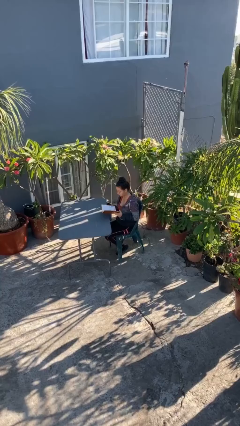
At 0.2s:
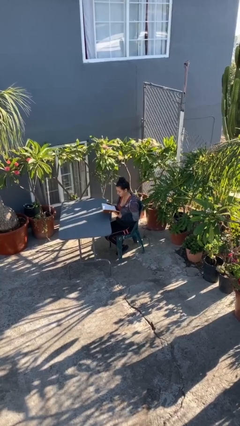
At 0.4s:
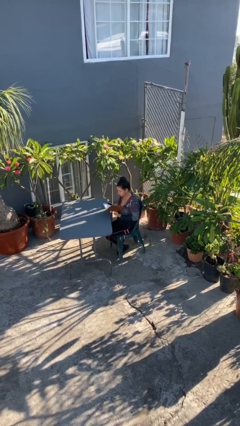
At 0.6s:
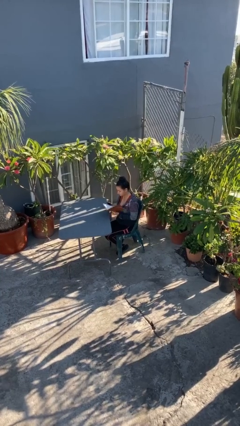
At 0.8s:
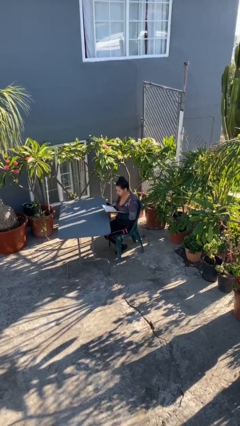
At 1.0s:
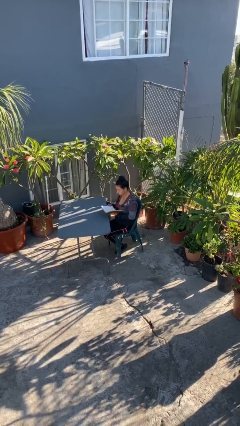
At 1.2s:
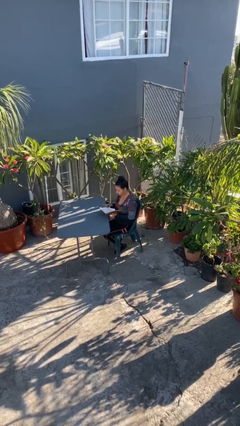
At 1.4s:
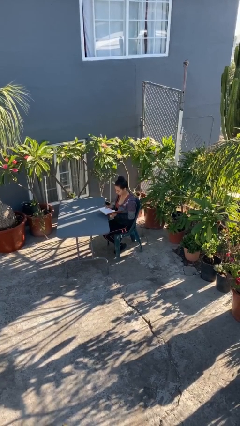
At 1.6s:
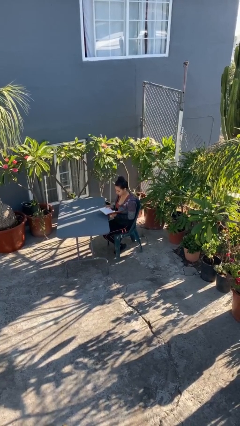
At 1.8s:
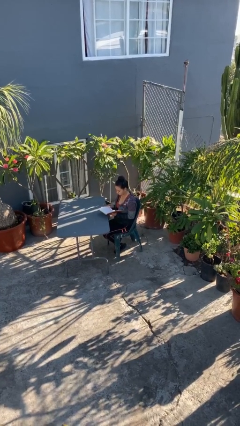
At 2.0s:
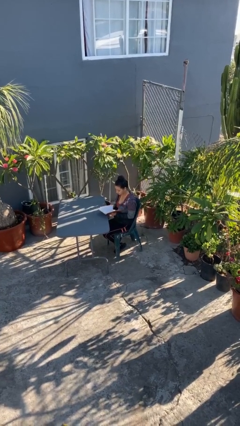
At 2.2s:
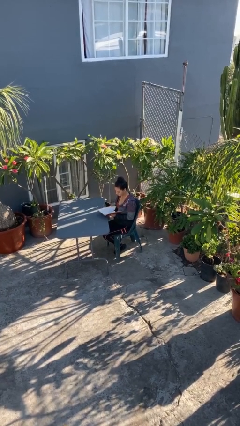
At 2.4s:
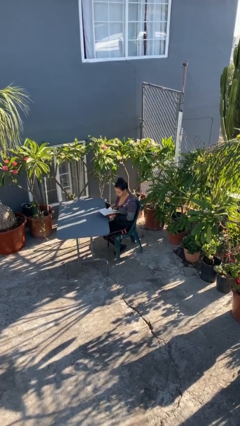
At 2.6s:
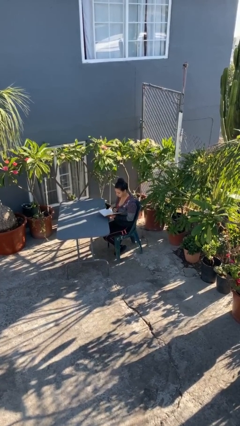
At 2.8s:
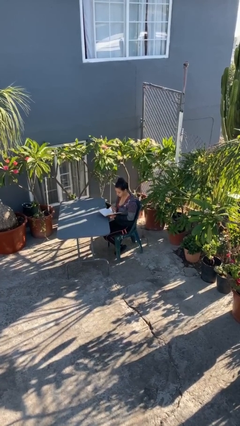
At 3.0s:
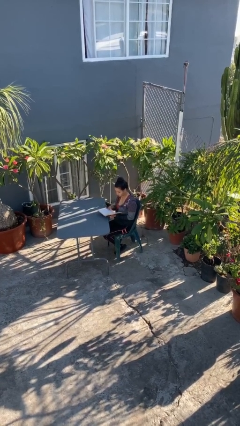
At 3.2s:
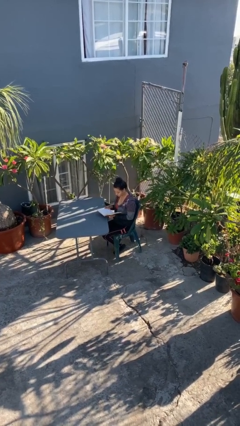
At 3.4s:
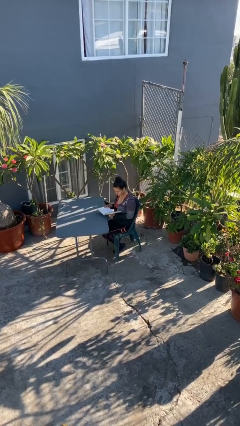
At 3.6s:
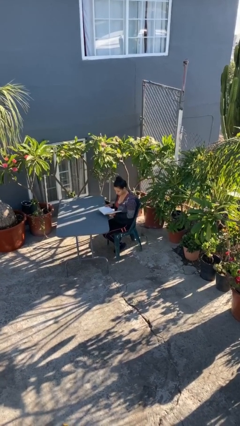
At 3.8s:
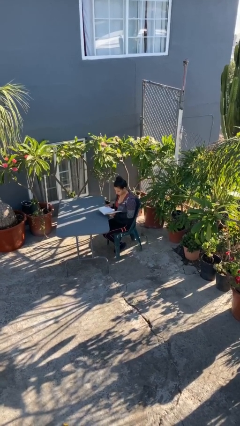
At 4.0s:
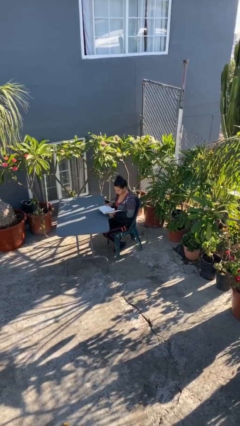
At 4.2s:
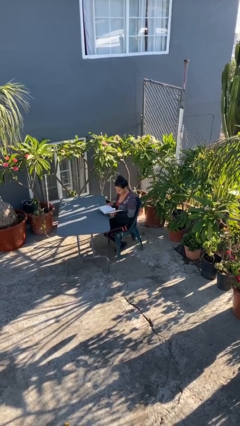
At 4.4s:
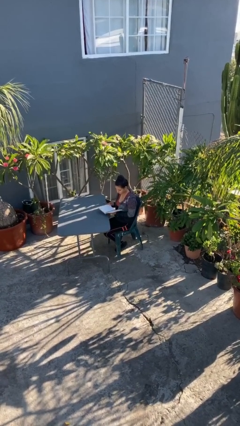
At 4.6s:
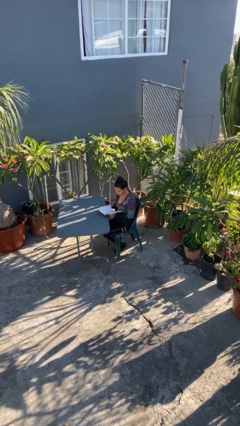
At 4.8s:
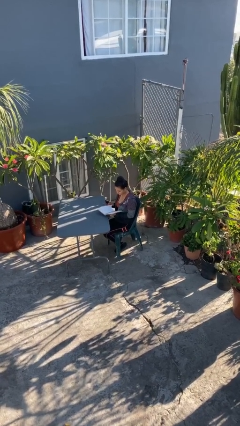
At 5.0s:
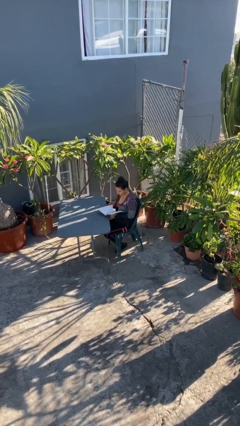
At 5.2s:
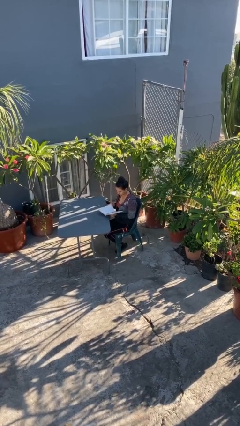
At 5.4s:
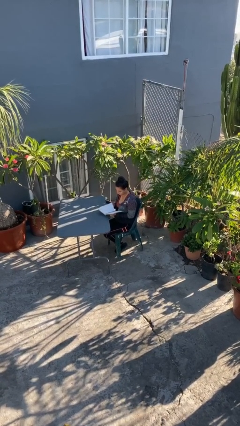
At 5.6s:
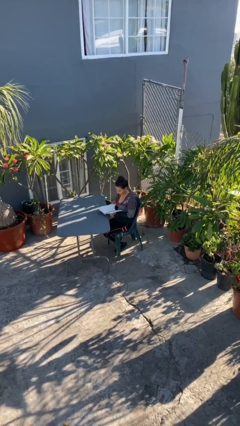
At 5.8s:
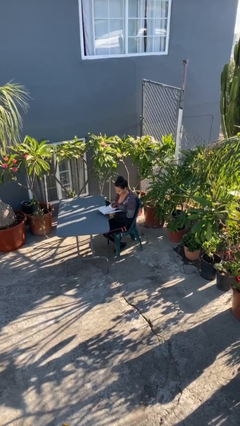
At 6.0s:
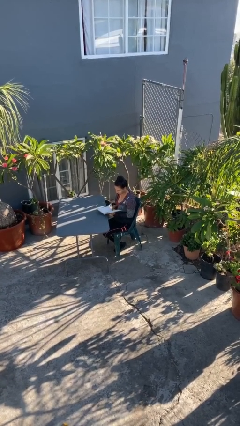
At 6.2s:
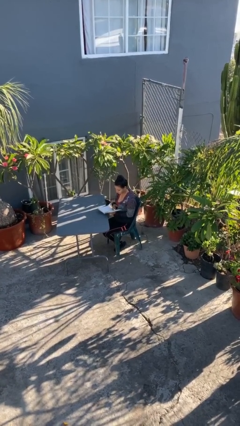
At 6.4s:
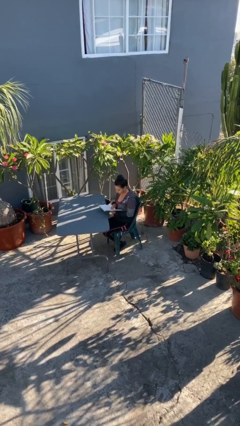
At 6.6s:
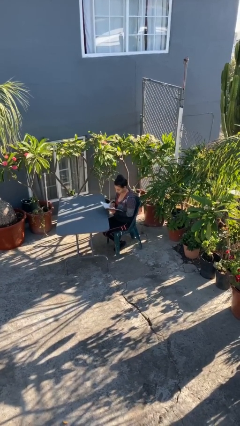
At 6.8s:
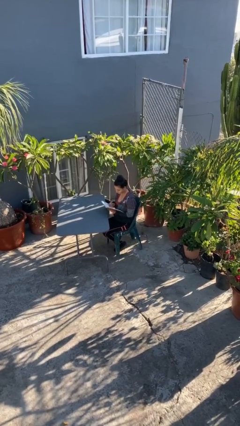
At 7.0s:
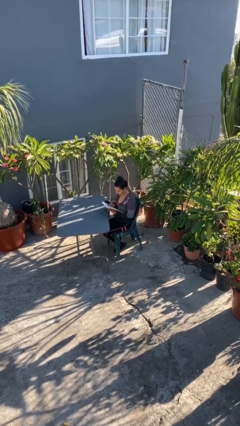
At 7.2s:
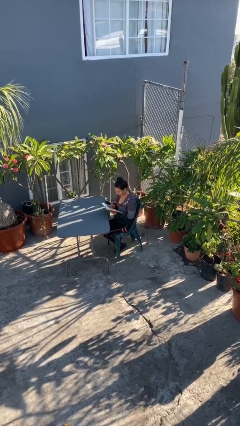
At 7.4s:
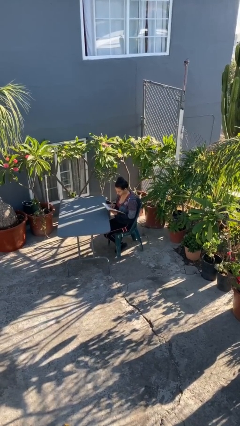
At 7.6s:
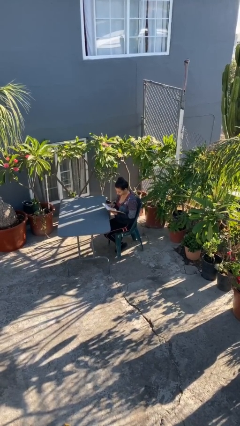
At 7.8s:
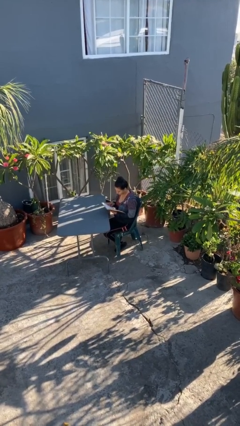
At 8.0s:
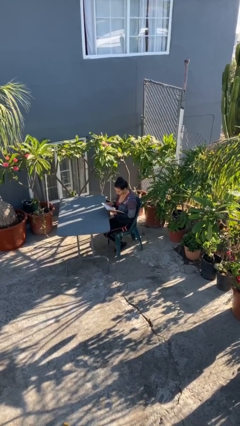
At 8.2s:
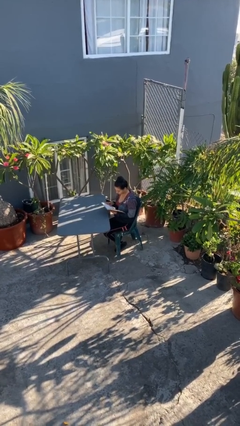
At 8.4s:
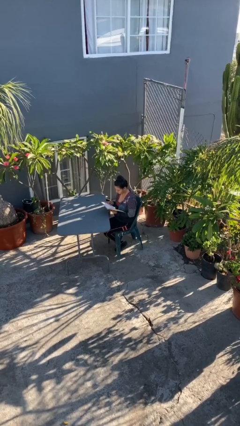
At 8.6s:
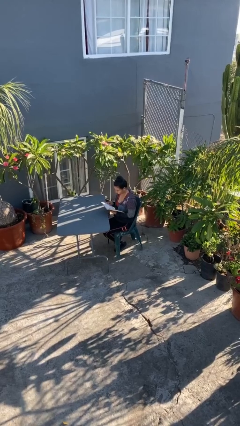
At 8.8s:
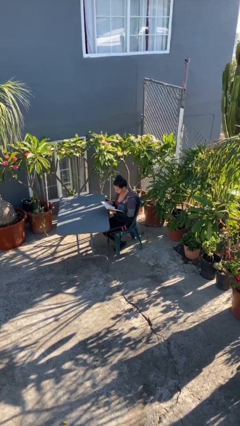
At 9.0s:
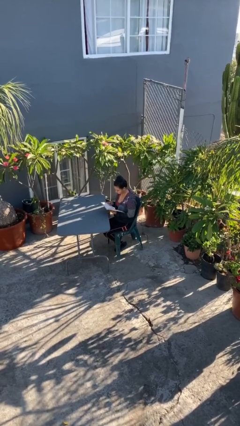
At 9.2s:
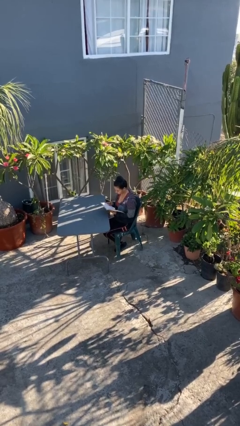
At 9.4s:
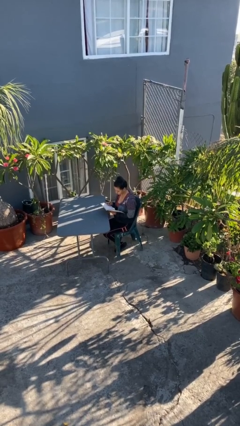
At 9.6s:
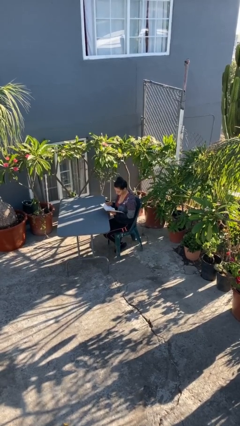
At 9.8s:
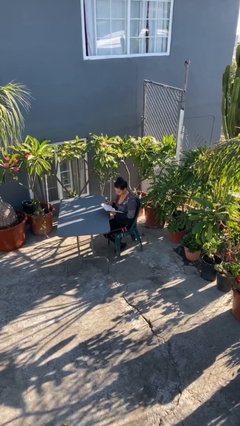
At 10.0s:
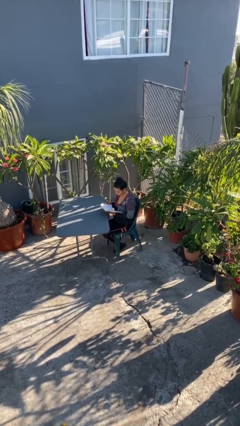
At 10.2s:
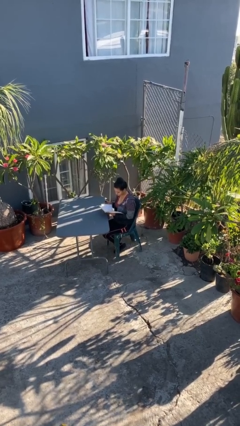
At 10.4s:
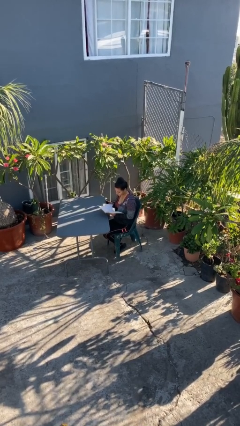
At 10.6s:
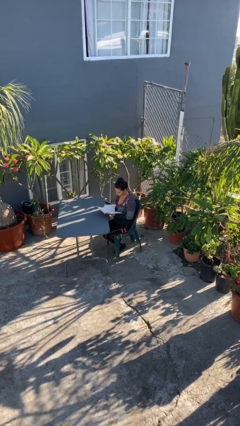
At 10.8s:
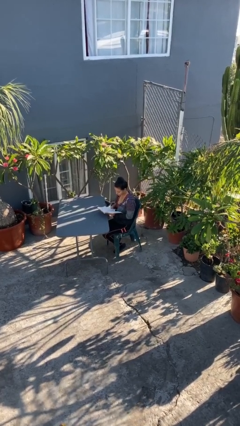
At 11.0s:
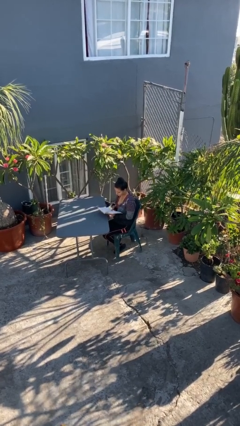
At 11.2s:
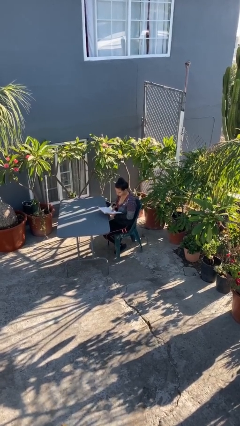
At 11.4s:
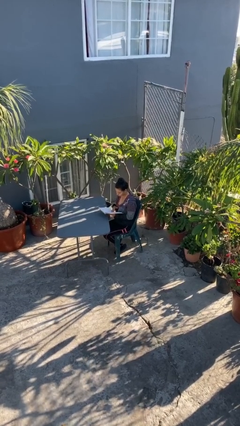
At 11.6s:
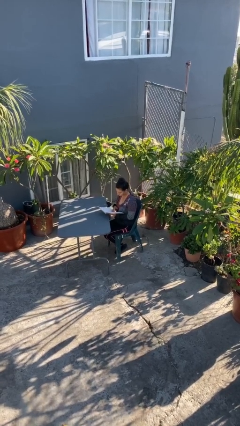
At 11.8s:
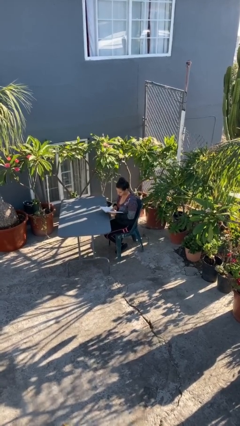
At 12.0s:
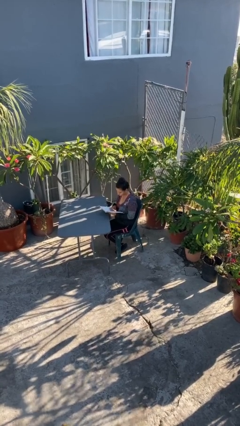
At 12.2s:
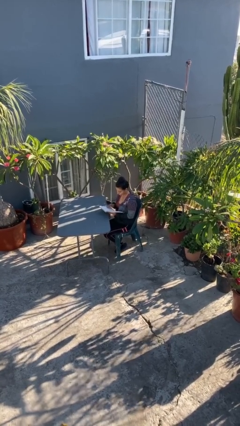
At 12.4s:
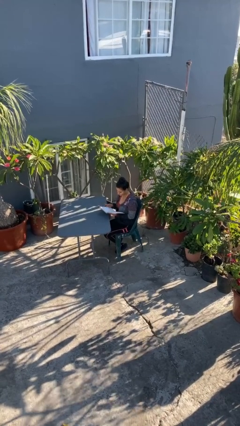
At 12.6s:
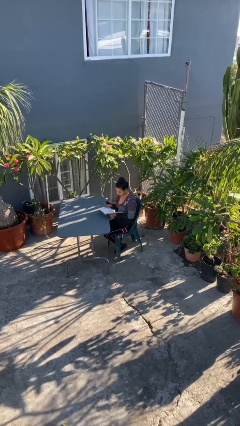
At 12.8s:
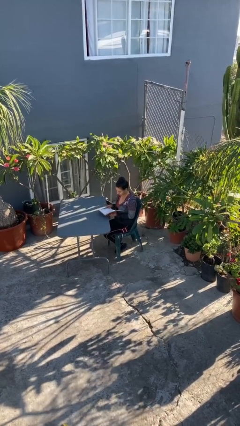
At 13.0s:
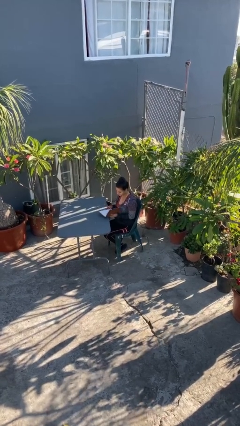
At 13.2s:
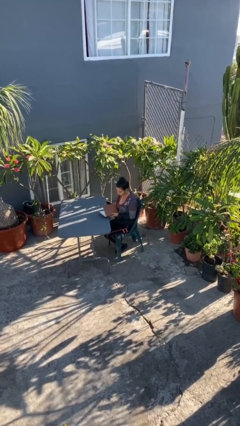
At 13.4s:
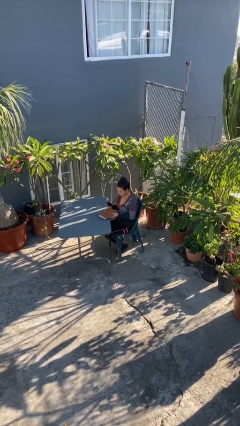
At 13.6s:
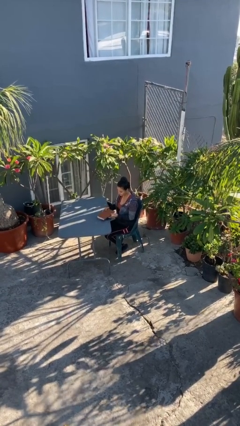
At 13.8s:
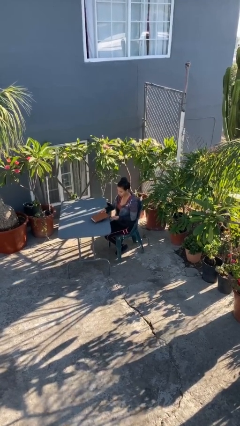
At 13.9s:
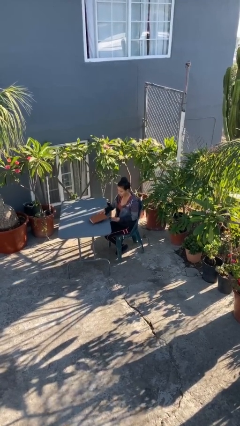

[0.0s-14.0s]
person reads document

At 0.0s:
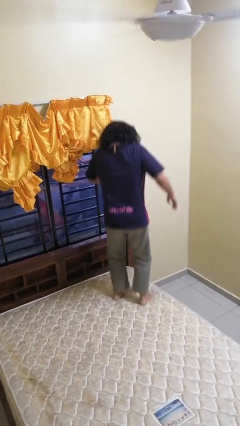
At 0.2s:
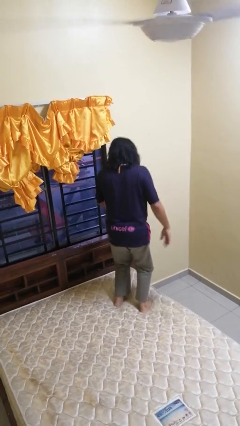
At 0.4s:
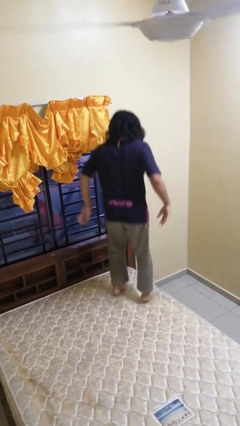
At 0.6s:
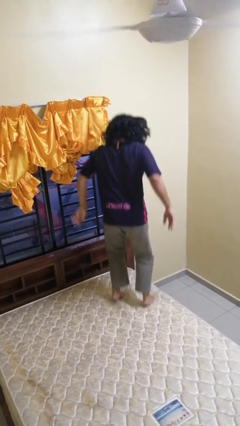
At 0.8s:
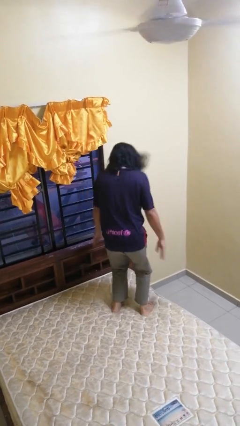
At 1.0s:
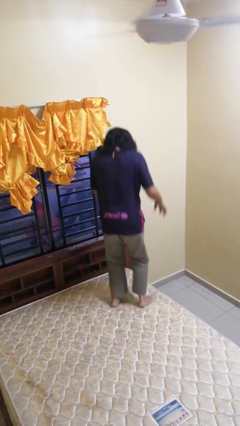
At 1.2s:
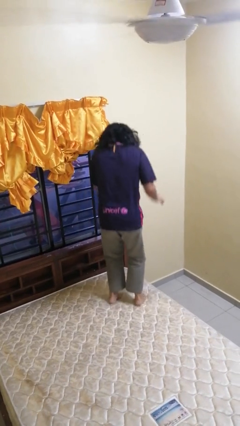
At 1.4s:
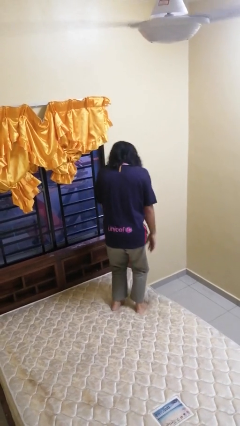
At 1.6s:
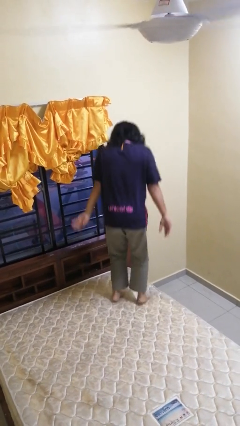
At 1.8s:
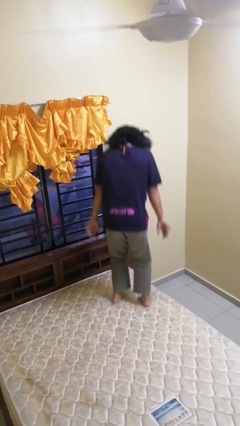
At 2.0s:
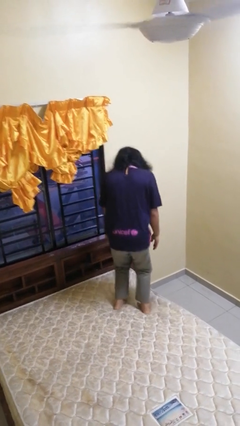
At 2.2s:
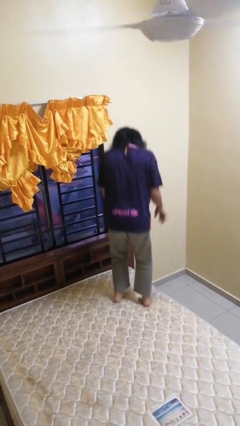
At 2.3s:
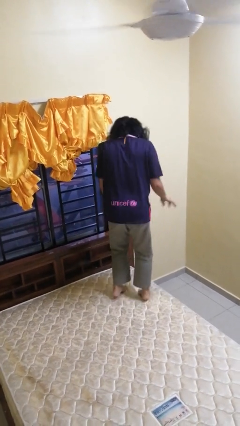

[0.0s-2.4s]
person jumps on bed

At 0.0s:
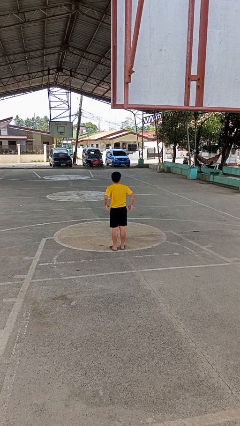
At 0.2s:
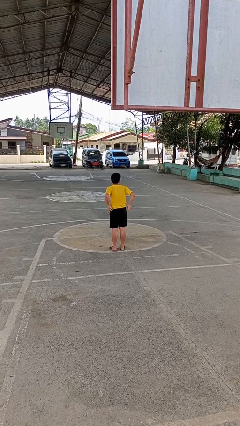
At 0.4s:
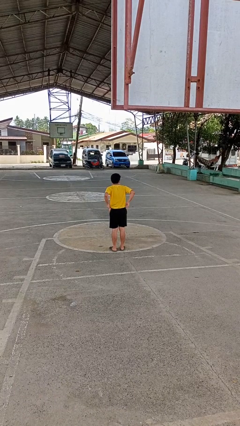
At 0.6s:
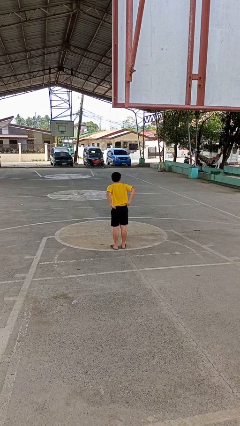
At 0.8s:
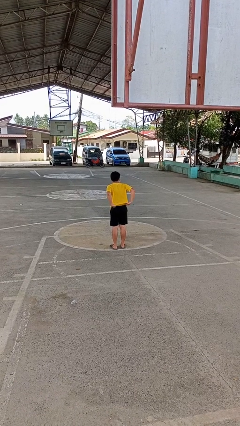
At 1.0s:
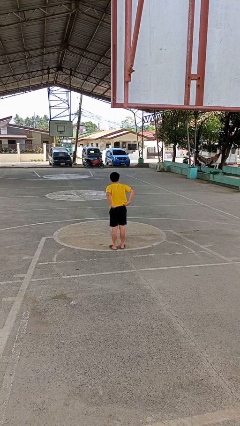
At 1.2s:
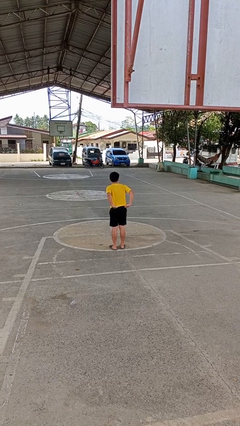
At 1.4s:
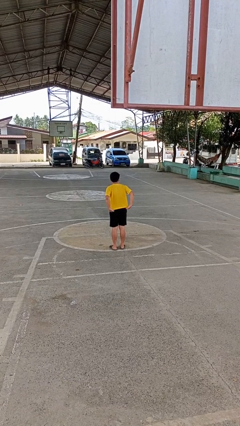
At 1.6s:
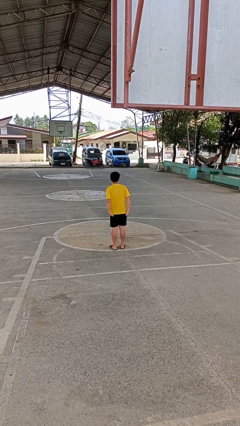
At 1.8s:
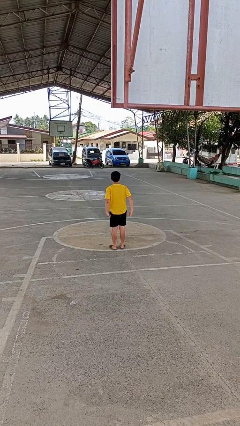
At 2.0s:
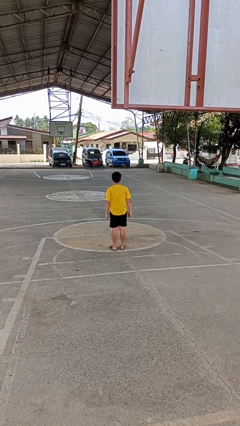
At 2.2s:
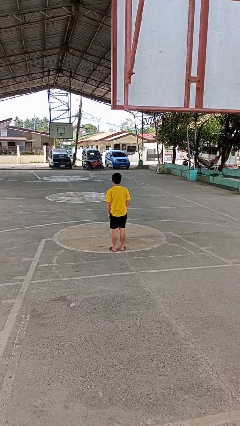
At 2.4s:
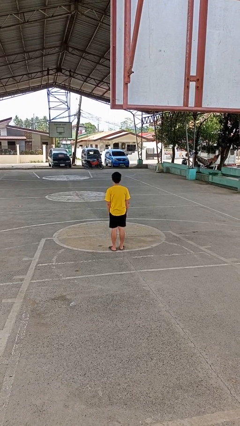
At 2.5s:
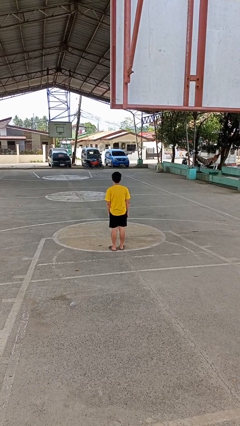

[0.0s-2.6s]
person untucks shirt
